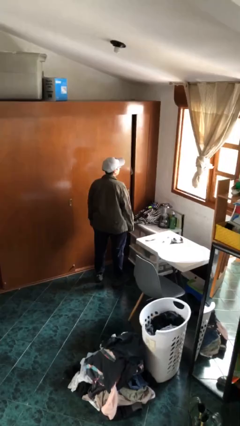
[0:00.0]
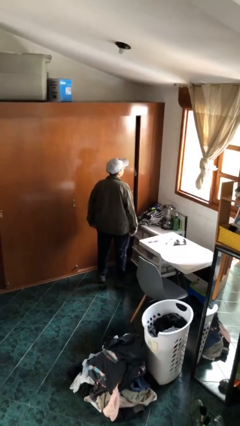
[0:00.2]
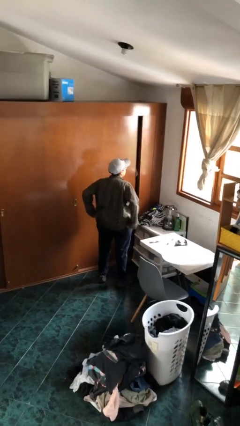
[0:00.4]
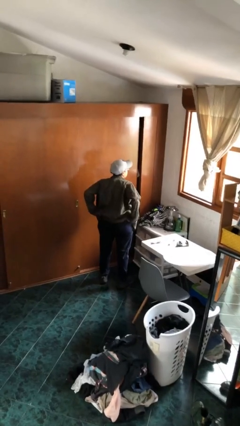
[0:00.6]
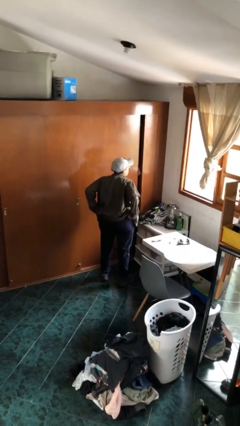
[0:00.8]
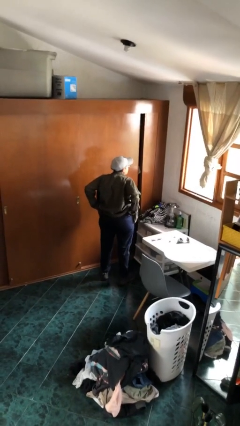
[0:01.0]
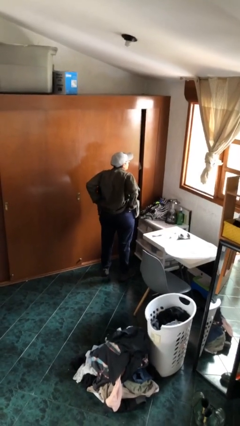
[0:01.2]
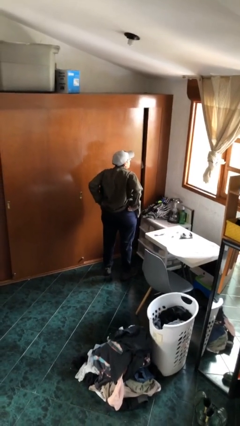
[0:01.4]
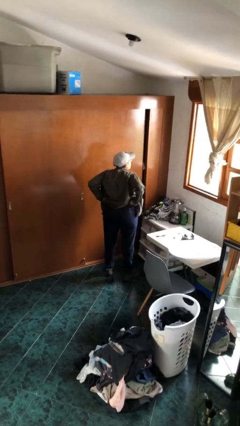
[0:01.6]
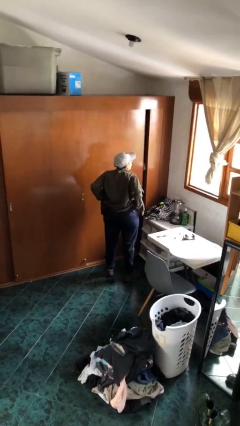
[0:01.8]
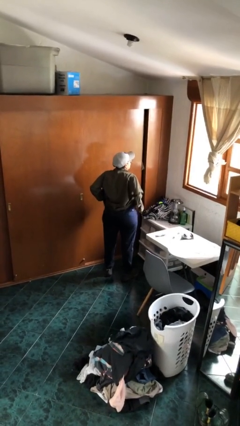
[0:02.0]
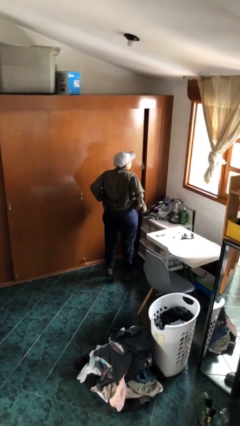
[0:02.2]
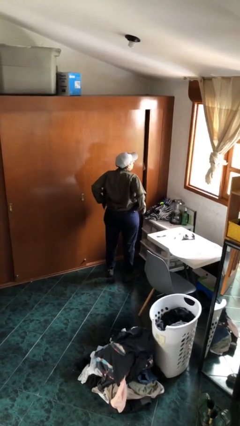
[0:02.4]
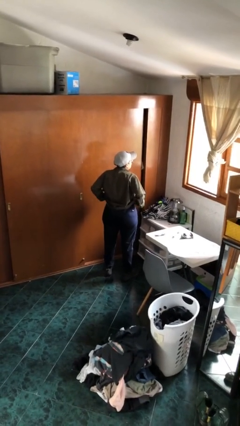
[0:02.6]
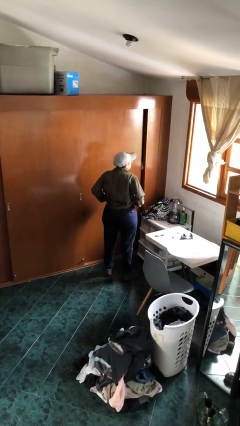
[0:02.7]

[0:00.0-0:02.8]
person hikes up pants

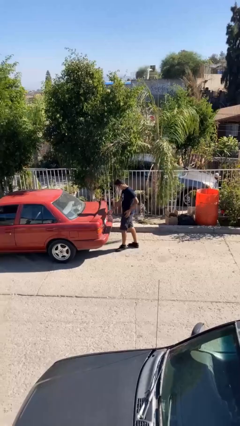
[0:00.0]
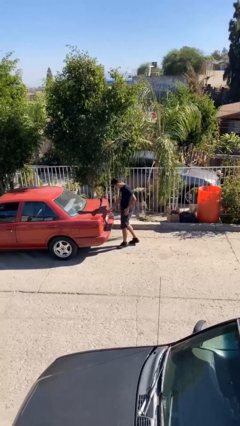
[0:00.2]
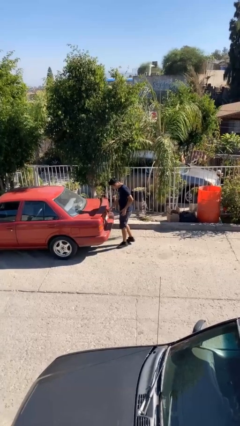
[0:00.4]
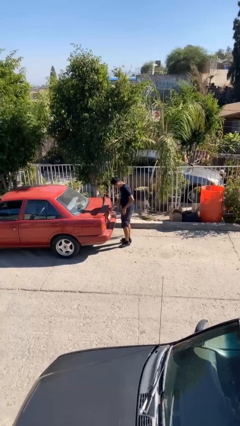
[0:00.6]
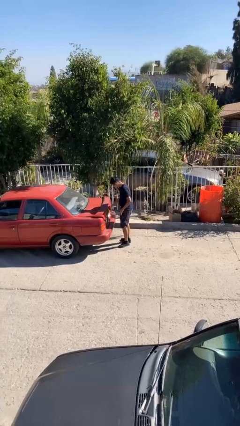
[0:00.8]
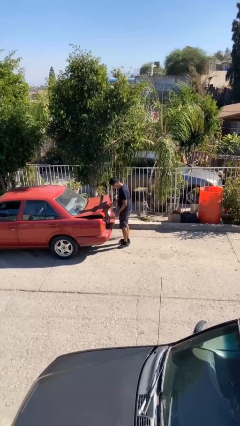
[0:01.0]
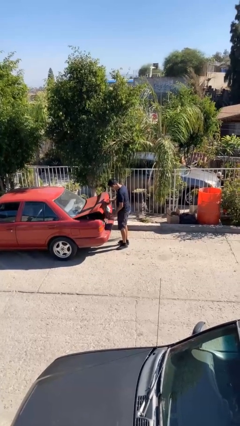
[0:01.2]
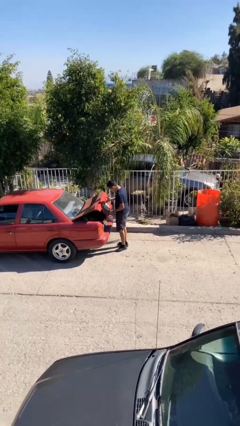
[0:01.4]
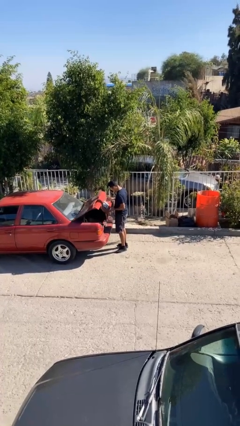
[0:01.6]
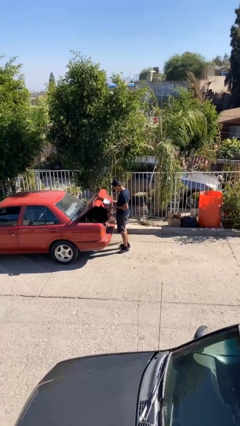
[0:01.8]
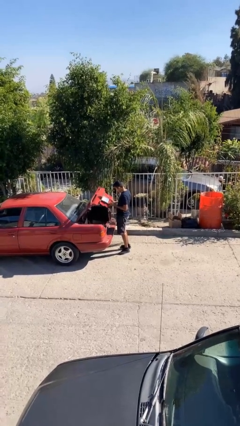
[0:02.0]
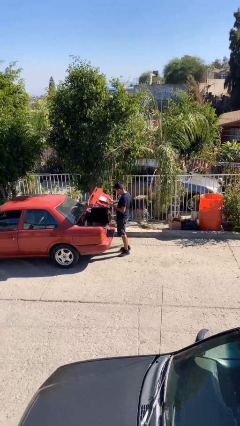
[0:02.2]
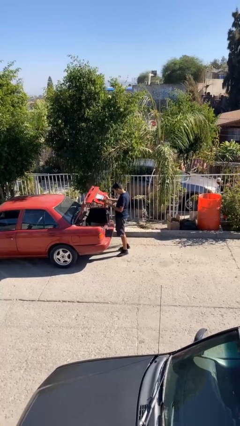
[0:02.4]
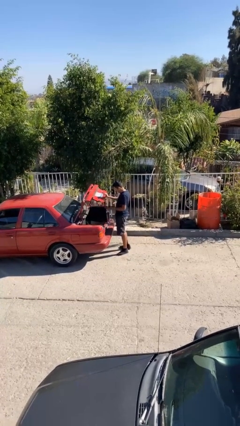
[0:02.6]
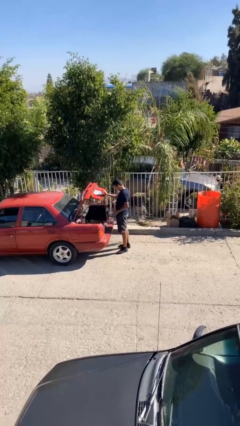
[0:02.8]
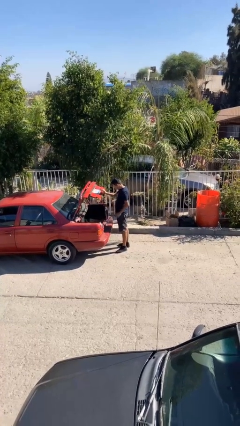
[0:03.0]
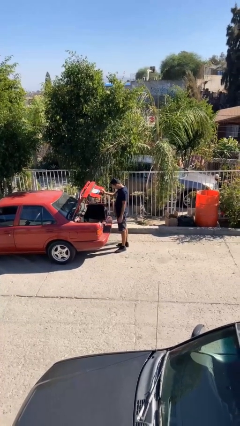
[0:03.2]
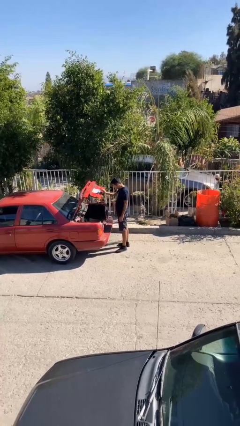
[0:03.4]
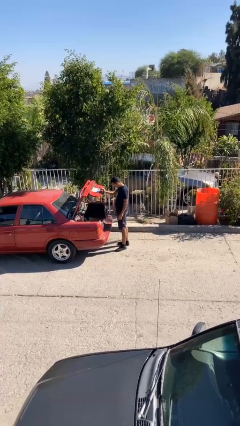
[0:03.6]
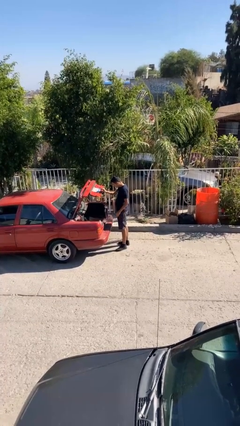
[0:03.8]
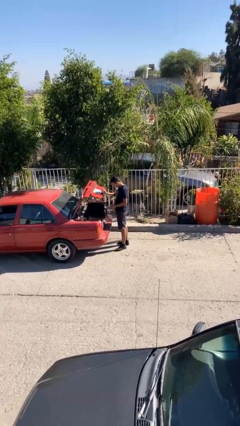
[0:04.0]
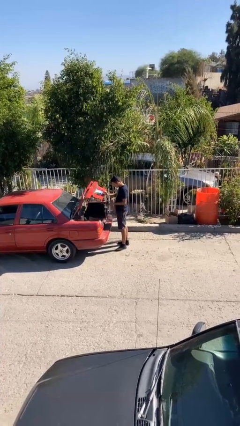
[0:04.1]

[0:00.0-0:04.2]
person opens car trunk

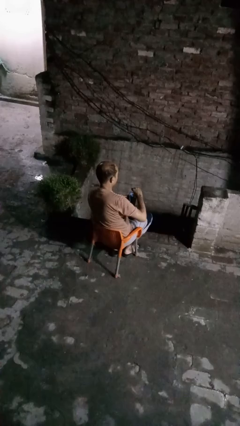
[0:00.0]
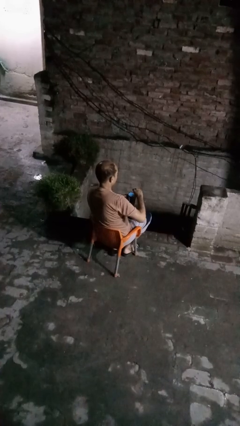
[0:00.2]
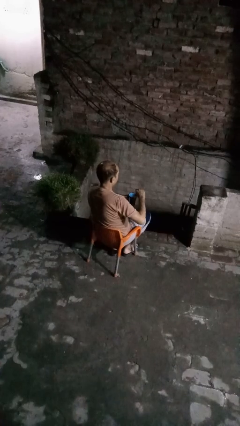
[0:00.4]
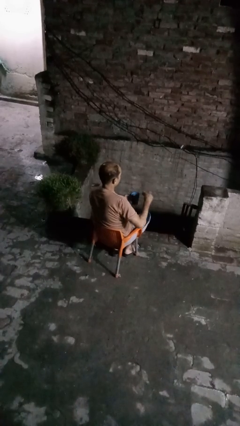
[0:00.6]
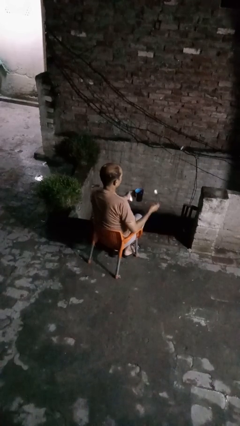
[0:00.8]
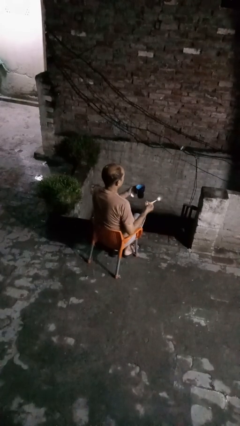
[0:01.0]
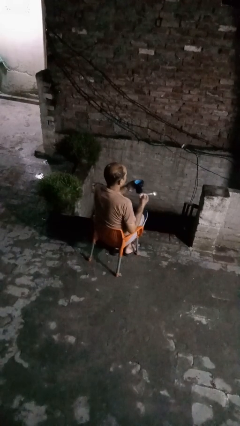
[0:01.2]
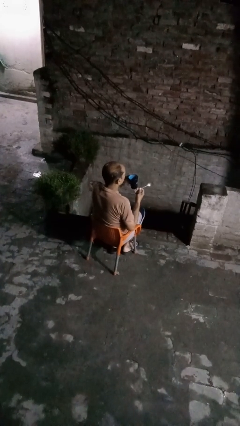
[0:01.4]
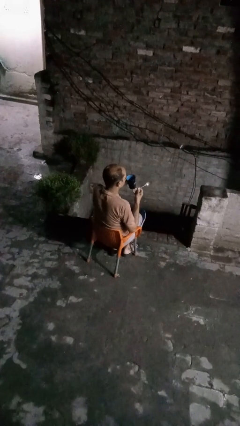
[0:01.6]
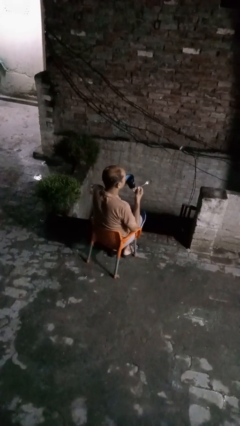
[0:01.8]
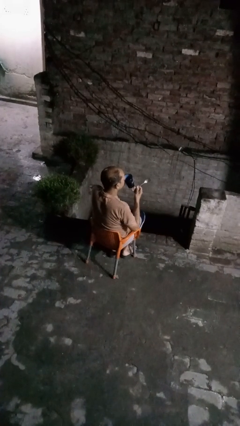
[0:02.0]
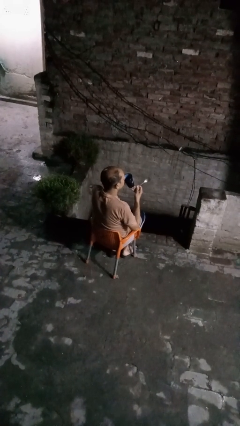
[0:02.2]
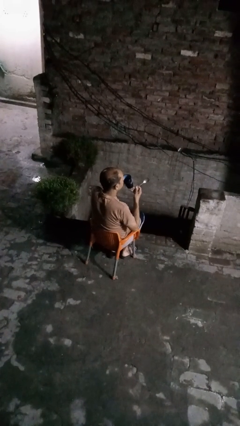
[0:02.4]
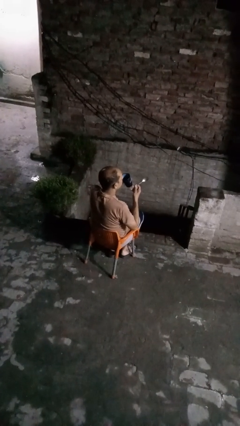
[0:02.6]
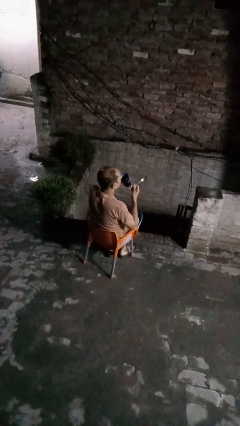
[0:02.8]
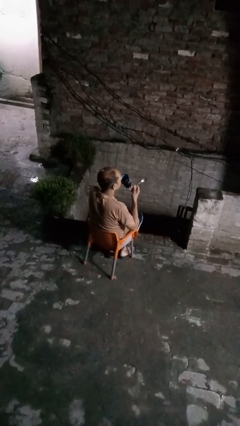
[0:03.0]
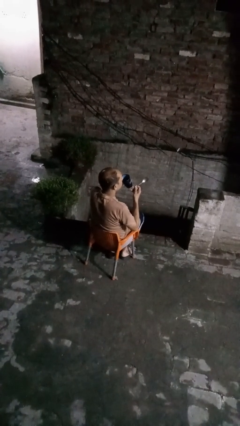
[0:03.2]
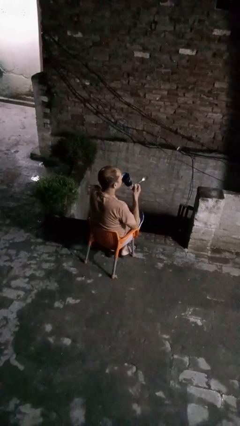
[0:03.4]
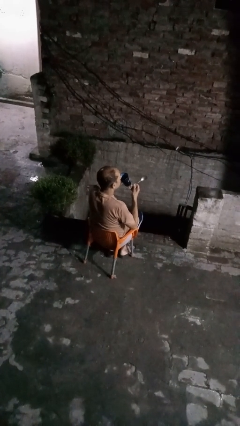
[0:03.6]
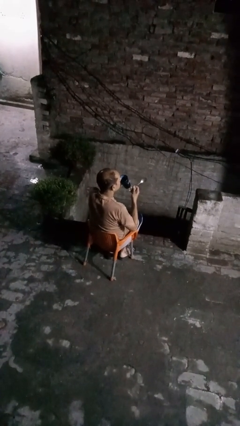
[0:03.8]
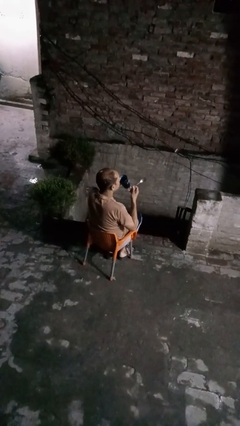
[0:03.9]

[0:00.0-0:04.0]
person drinks from mug

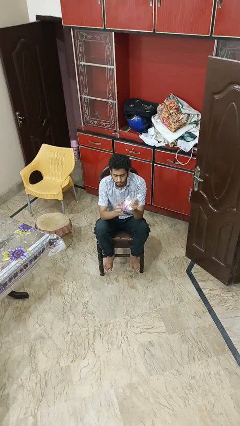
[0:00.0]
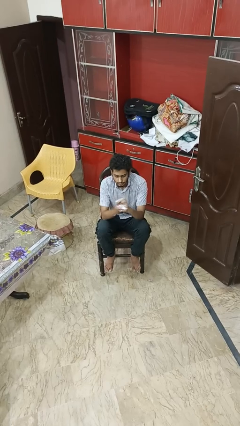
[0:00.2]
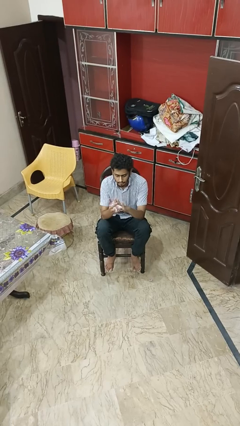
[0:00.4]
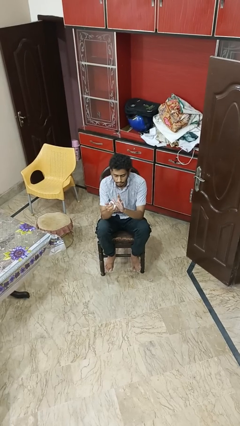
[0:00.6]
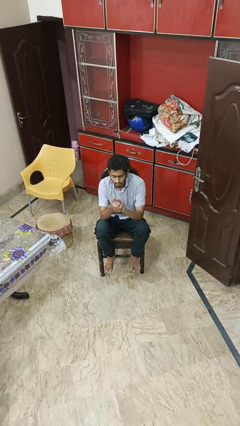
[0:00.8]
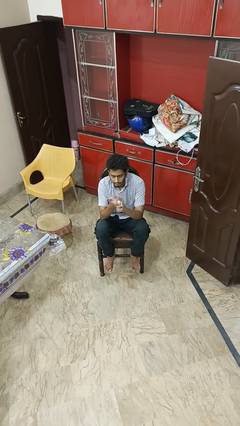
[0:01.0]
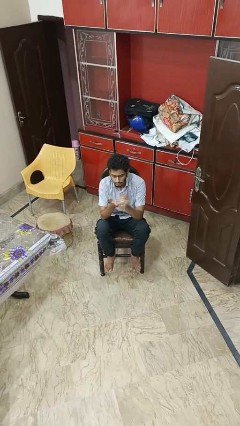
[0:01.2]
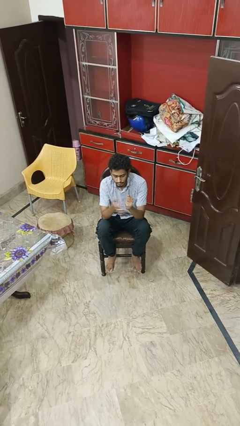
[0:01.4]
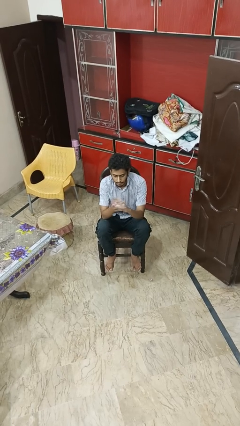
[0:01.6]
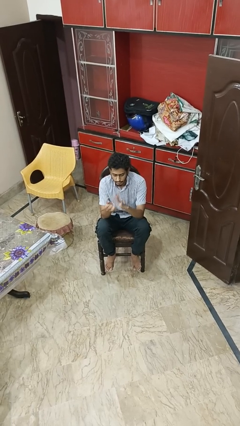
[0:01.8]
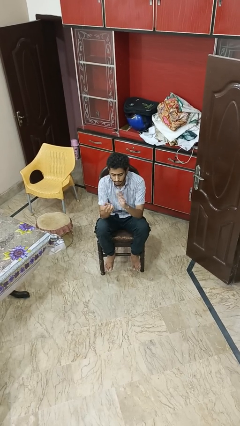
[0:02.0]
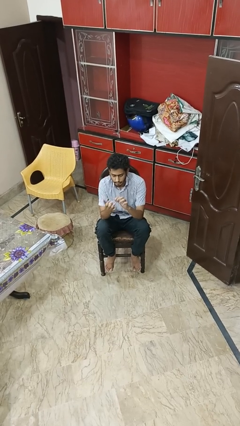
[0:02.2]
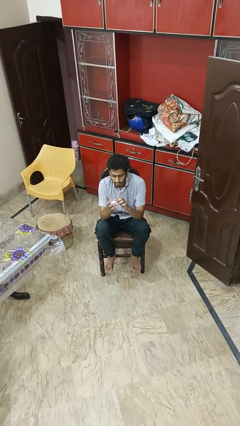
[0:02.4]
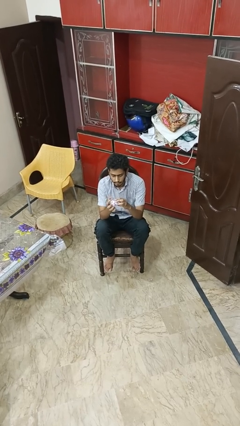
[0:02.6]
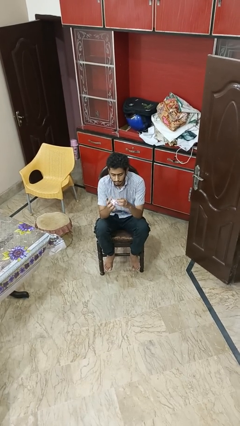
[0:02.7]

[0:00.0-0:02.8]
person crumples paper

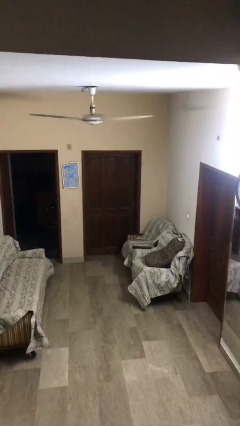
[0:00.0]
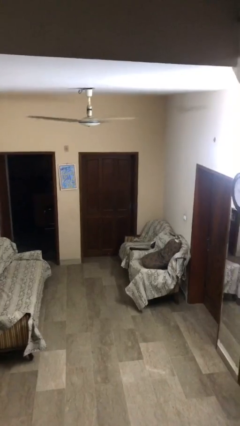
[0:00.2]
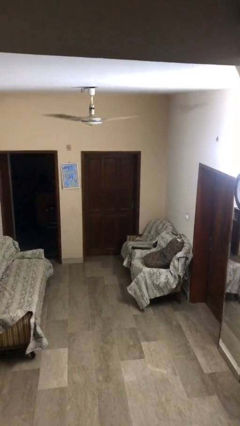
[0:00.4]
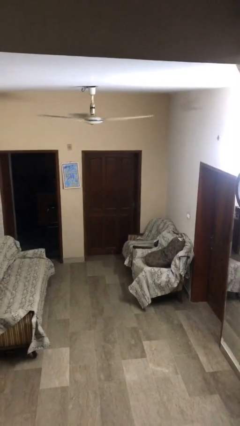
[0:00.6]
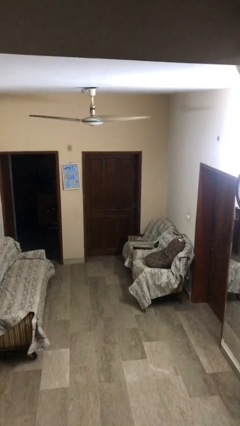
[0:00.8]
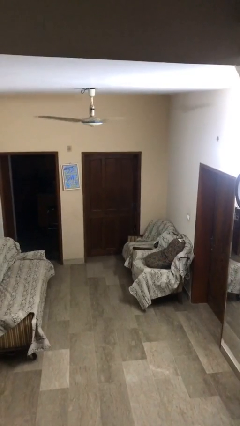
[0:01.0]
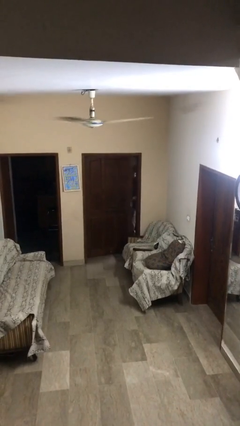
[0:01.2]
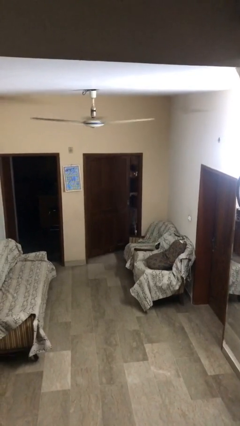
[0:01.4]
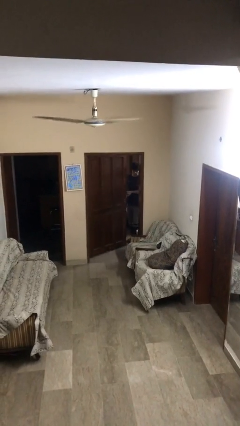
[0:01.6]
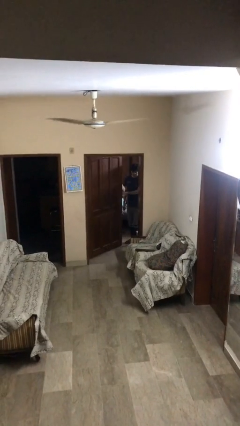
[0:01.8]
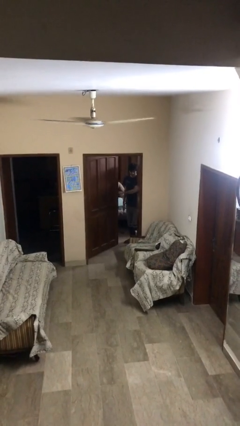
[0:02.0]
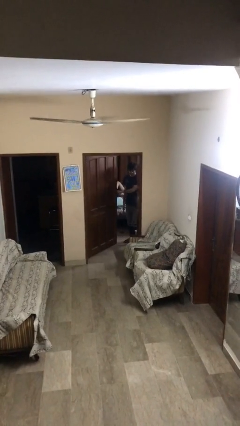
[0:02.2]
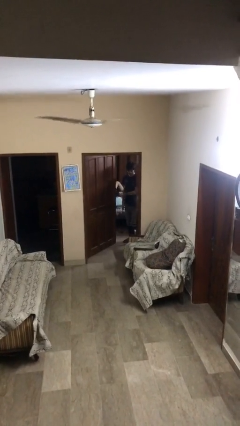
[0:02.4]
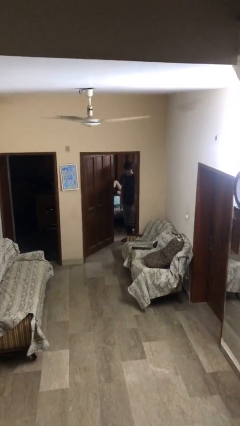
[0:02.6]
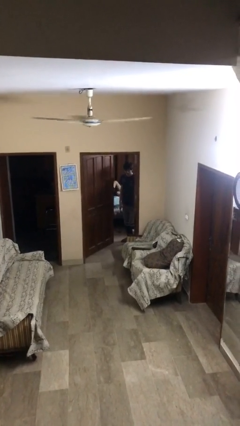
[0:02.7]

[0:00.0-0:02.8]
person opens facility door

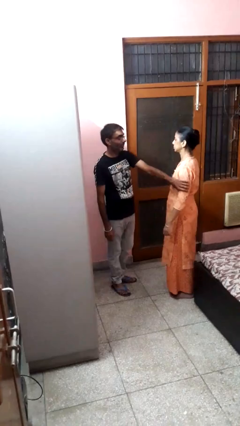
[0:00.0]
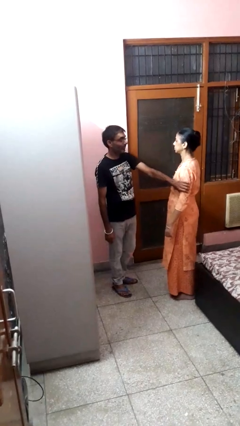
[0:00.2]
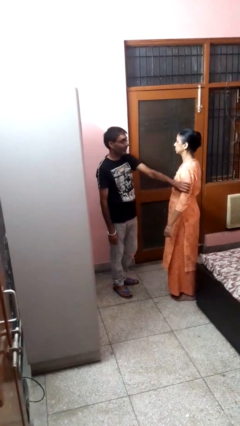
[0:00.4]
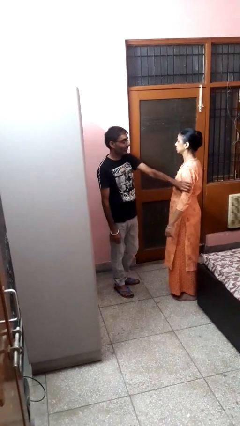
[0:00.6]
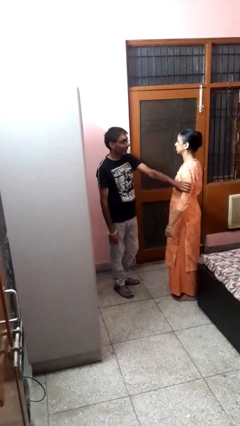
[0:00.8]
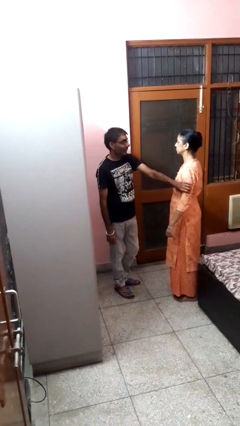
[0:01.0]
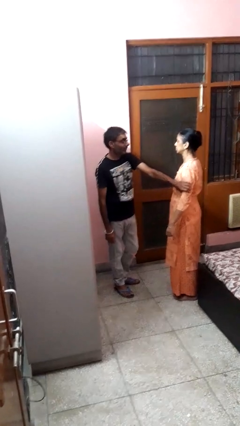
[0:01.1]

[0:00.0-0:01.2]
person grabs person by bicep
